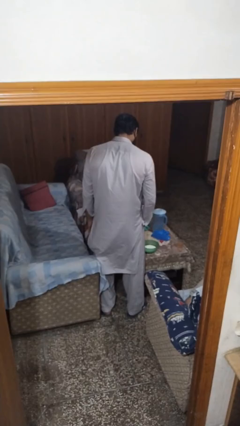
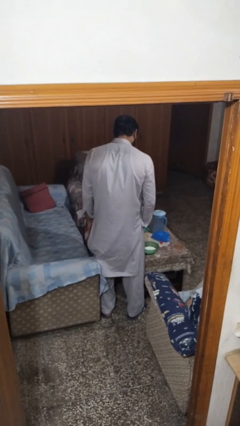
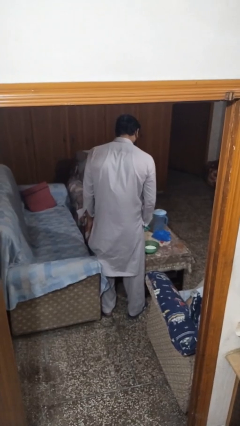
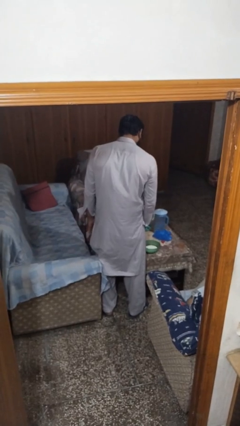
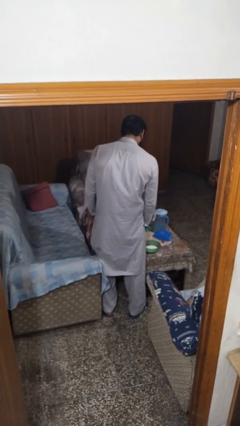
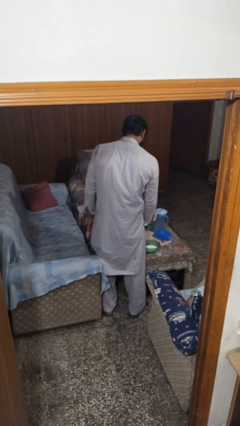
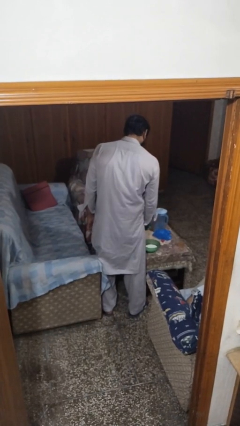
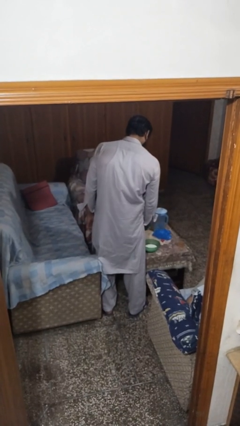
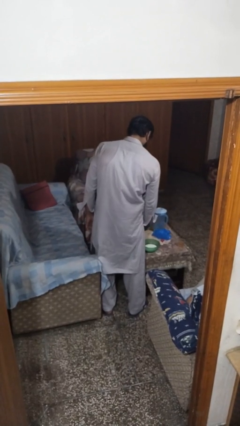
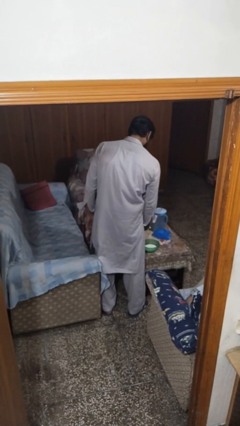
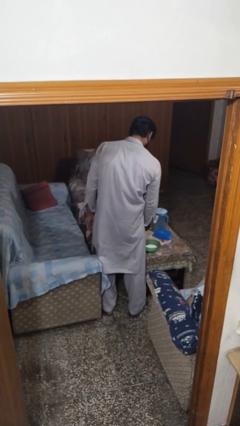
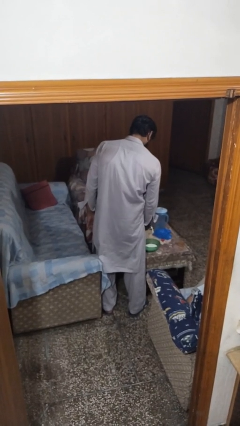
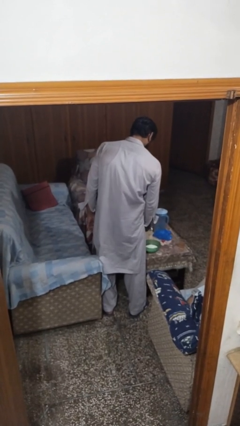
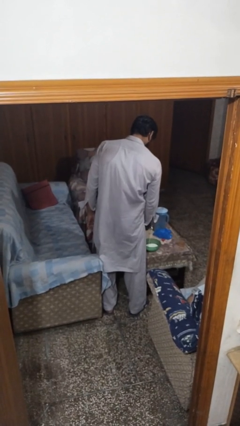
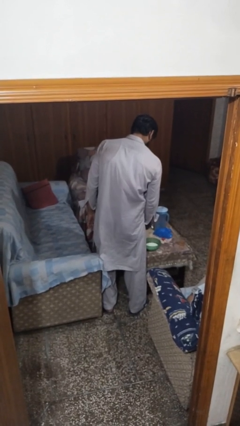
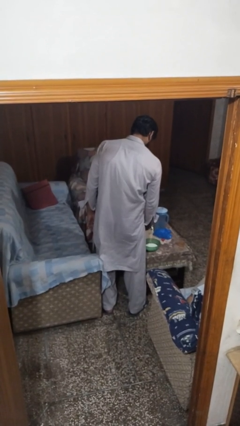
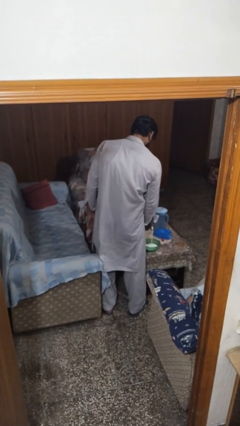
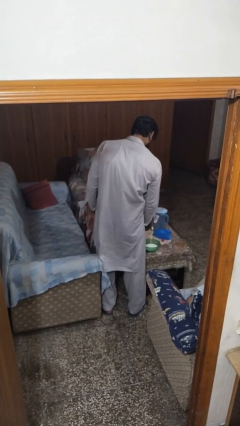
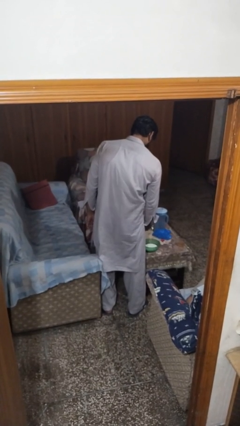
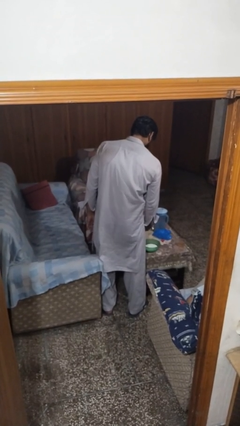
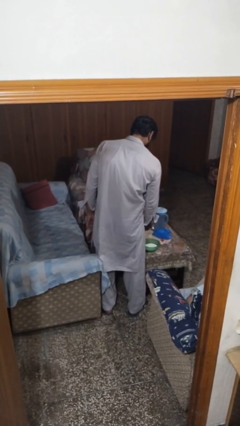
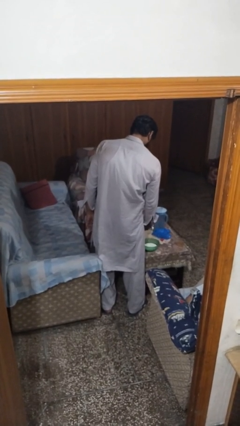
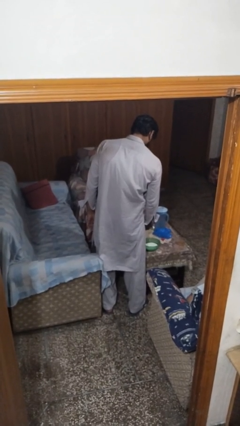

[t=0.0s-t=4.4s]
person pours into bowl

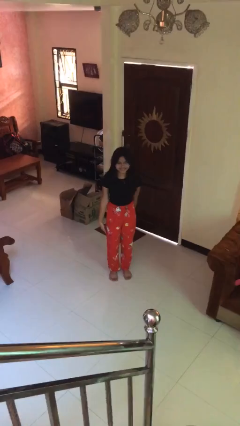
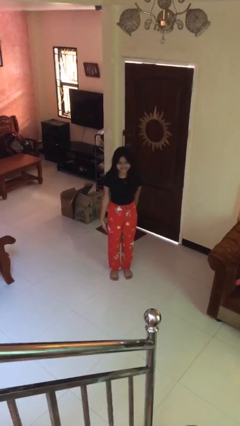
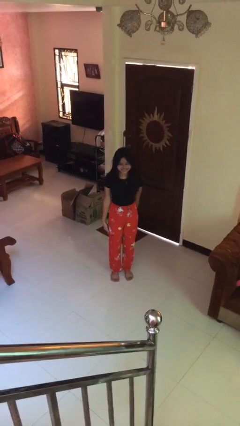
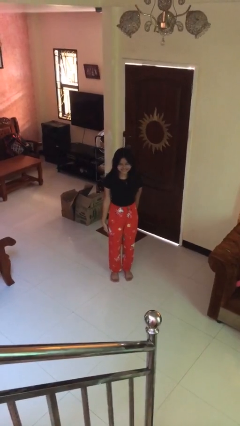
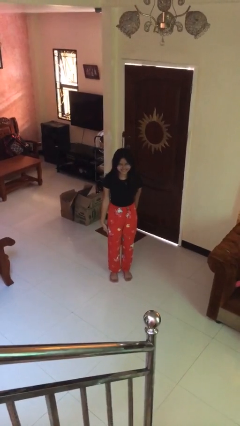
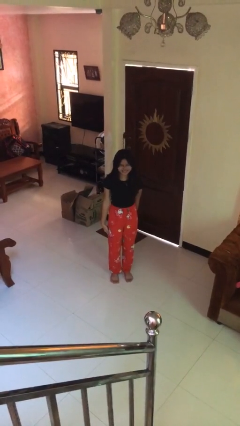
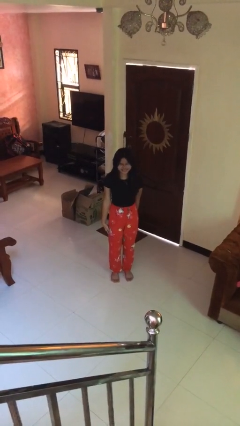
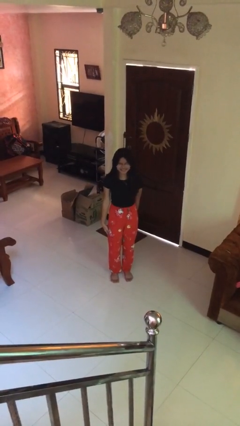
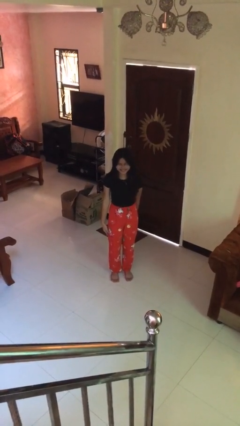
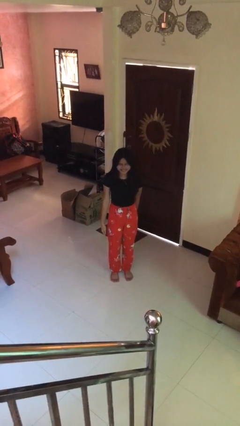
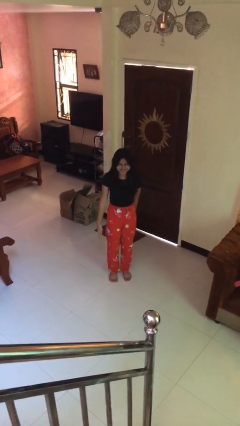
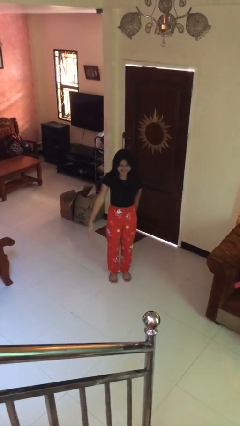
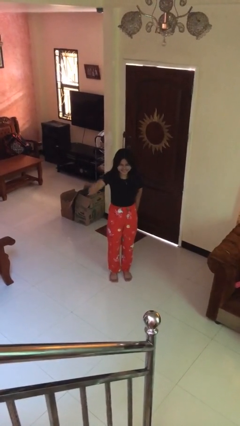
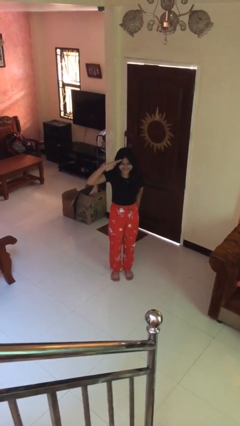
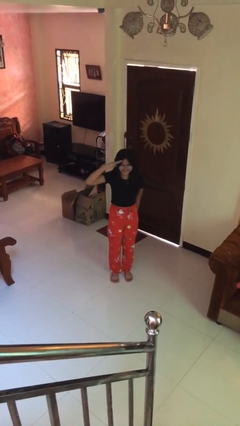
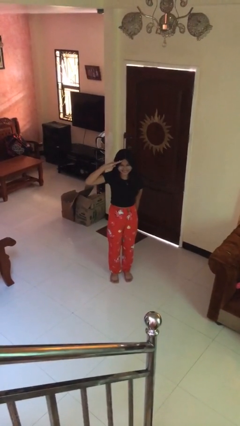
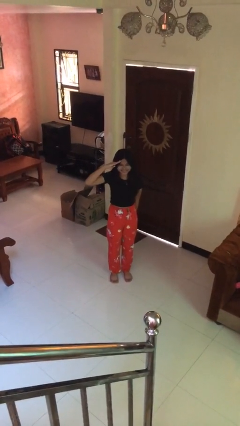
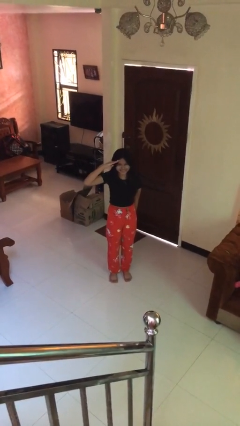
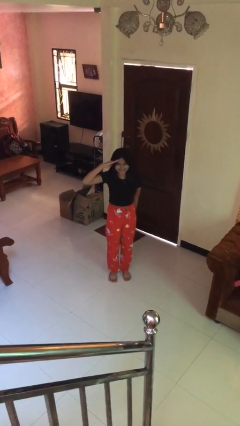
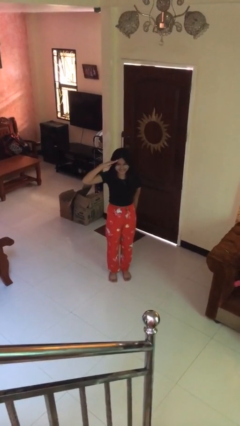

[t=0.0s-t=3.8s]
person salutes

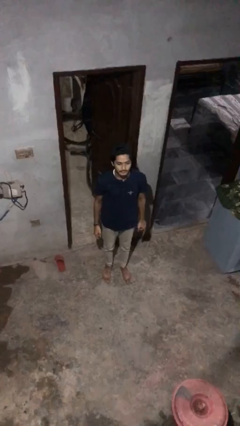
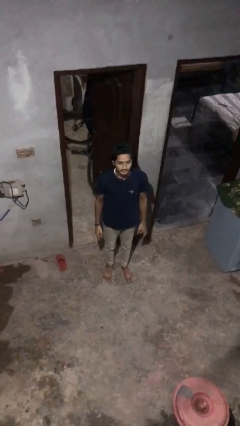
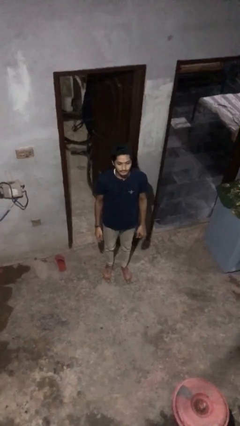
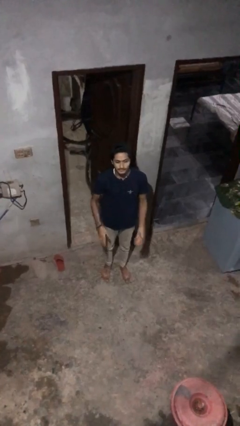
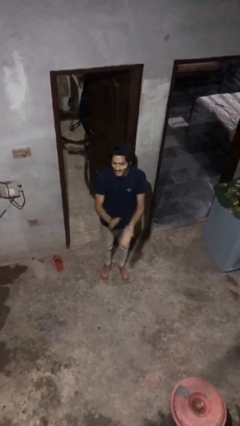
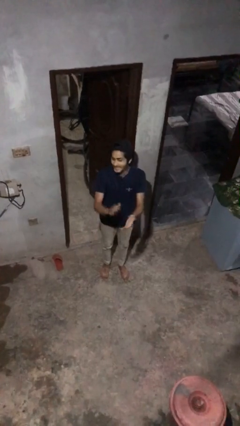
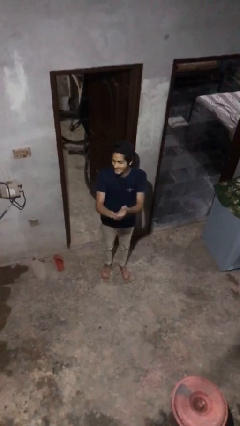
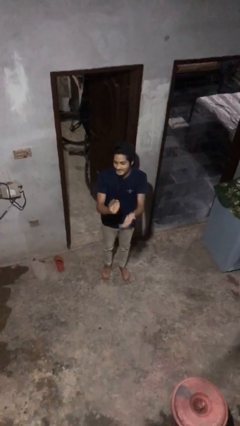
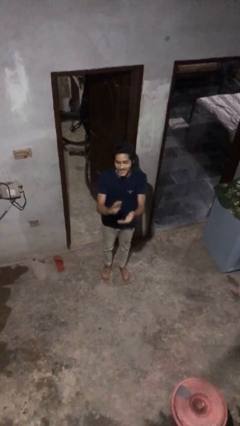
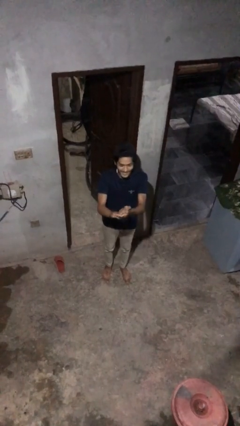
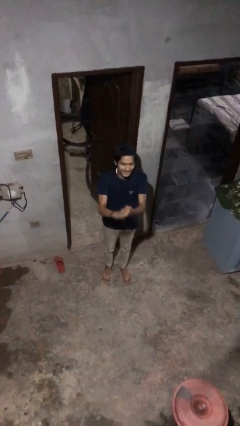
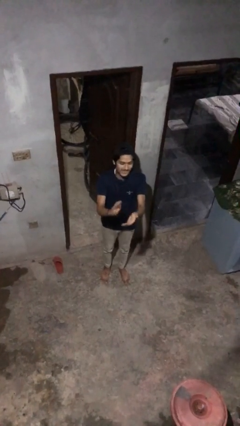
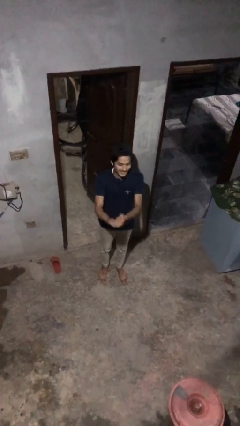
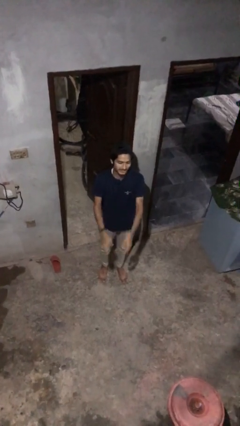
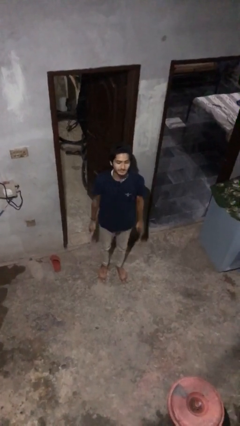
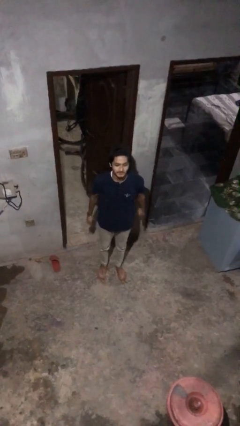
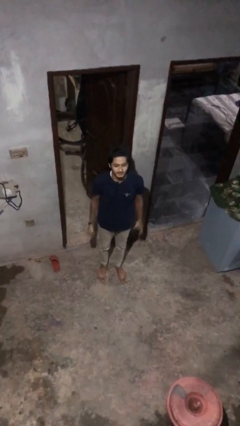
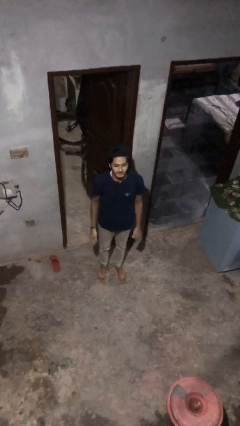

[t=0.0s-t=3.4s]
person claps hands

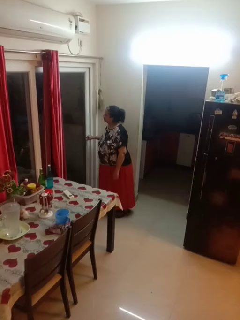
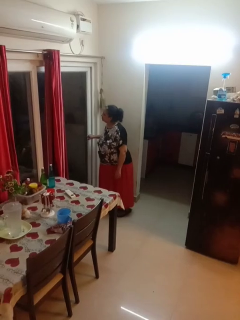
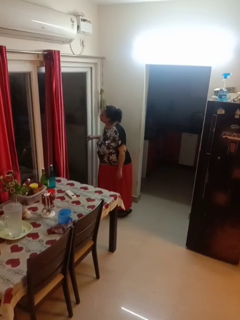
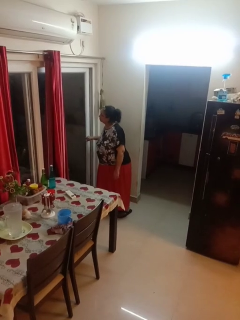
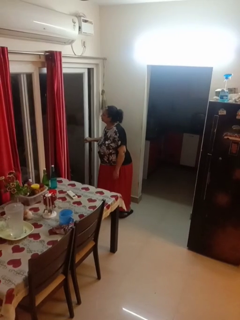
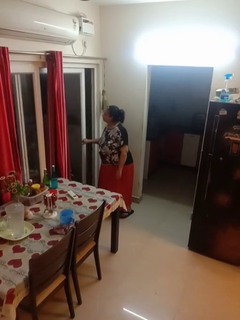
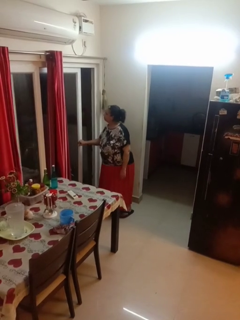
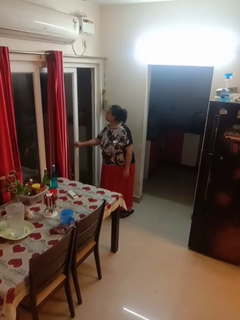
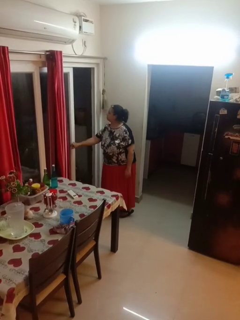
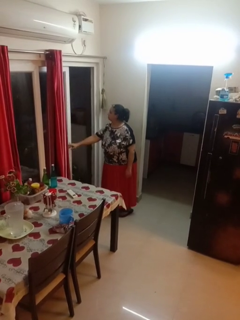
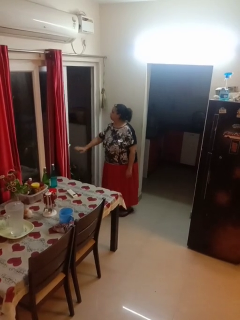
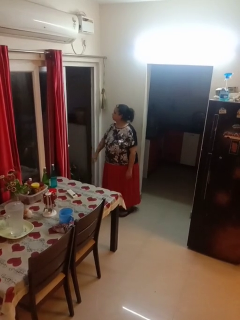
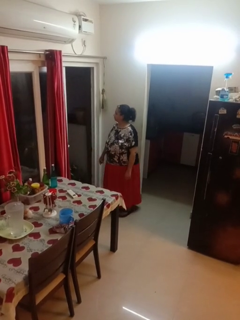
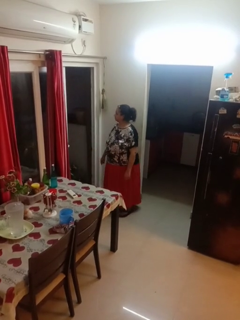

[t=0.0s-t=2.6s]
person opens sliding door

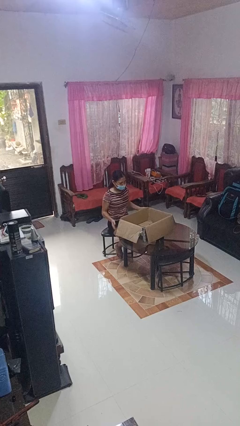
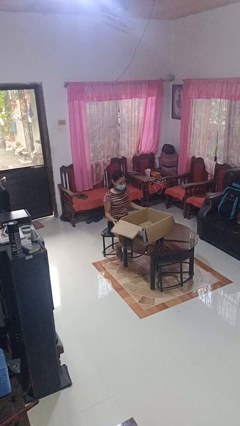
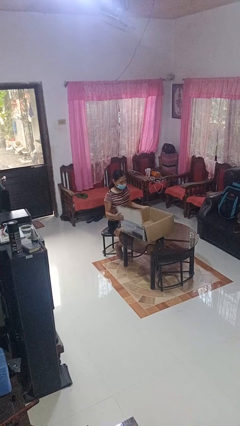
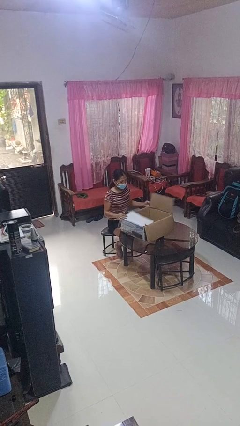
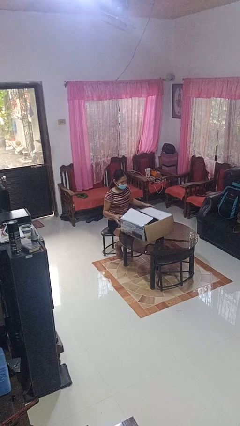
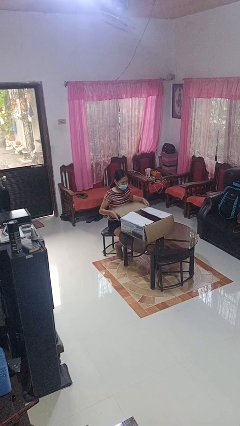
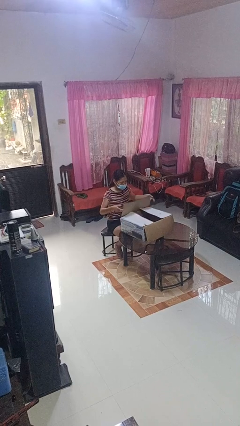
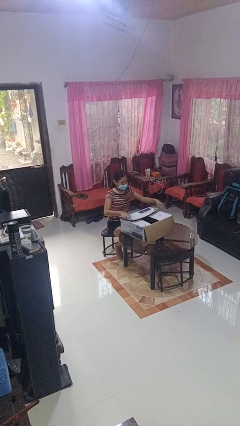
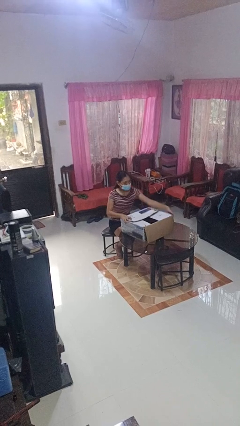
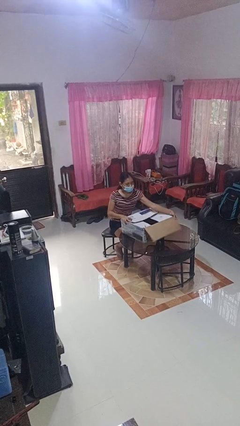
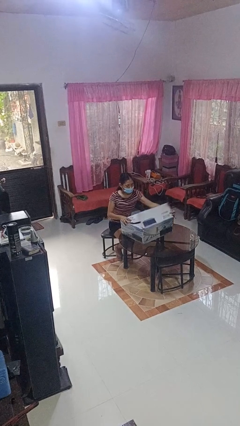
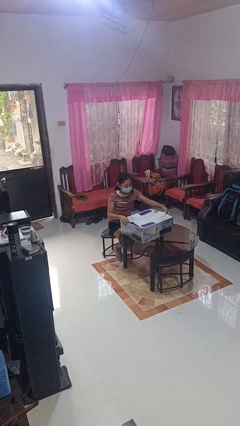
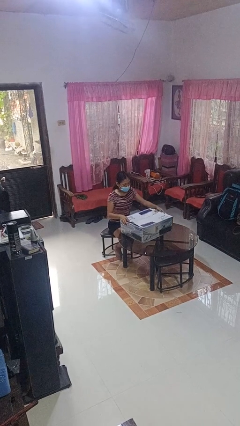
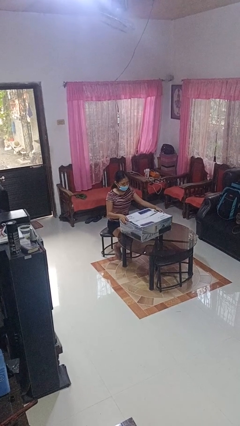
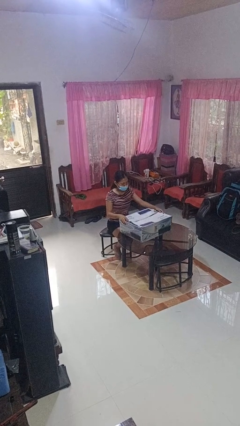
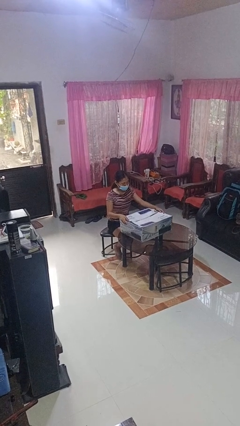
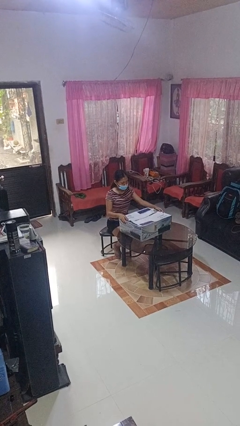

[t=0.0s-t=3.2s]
person closes box

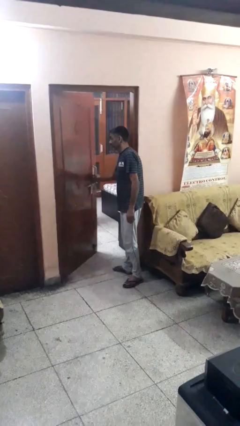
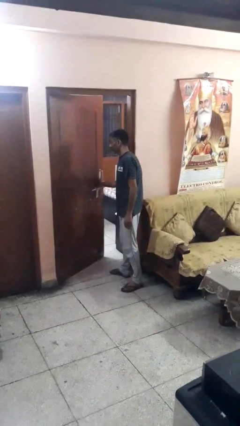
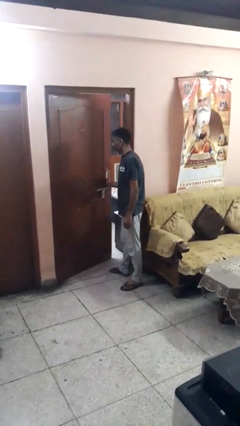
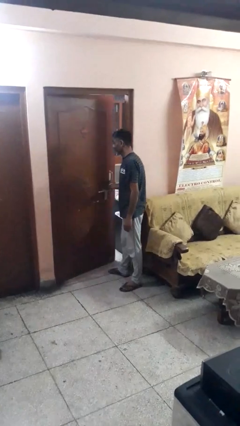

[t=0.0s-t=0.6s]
person opens facility door
